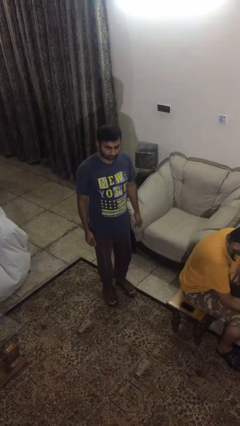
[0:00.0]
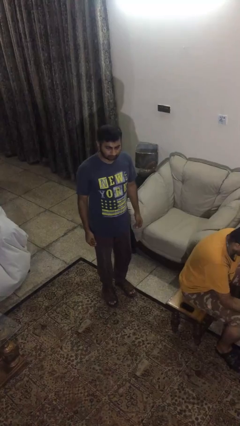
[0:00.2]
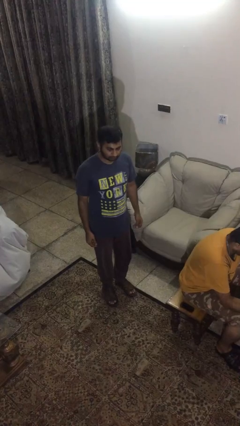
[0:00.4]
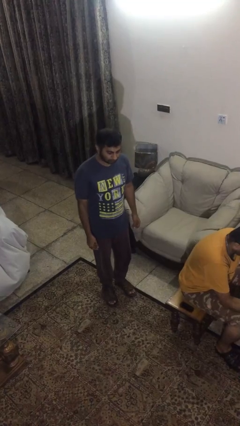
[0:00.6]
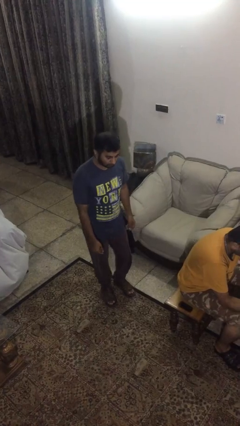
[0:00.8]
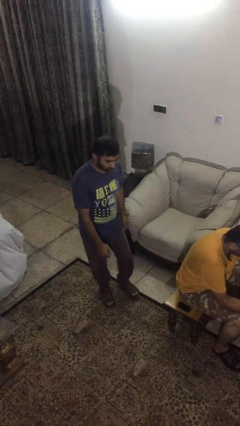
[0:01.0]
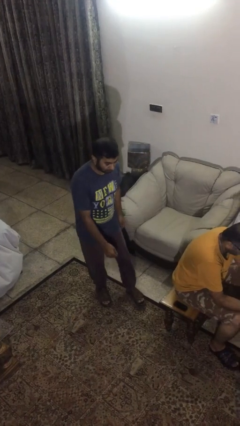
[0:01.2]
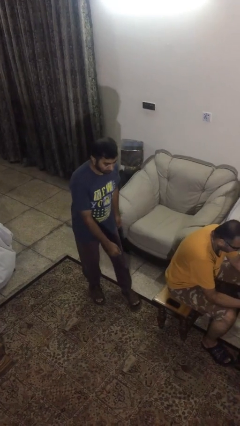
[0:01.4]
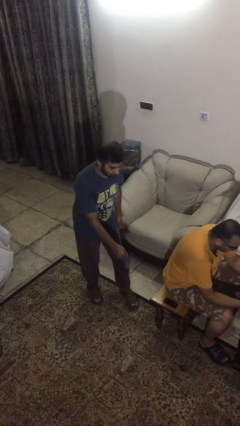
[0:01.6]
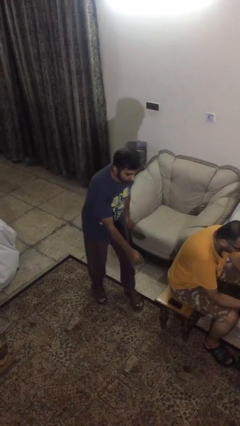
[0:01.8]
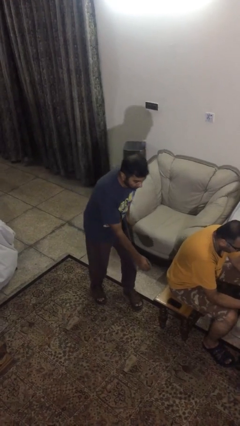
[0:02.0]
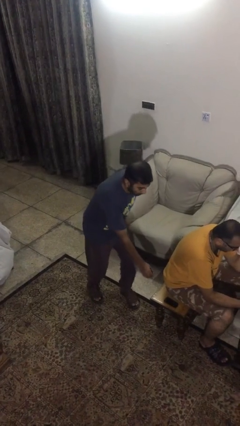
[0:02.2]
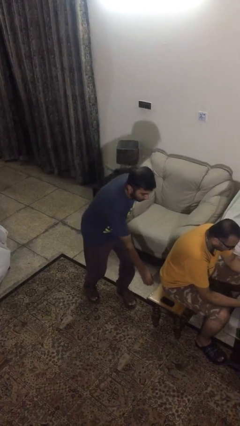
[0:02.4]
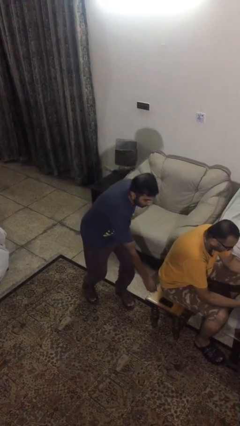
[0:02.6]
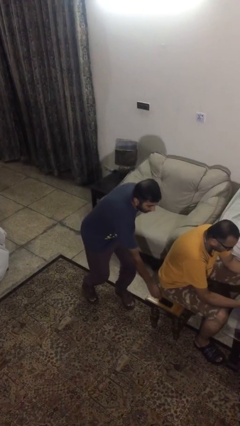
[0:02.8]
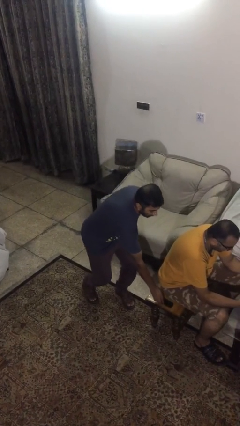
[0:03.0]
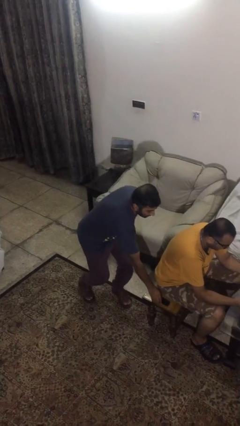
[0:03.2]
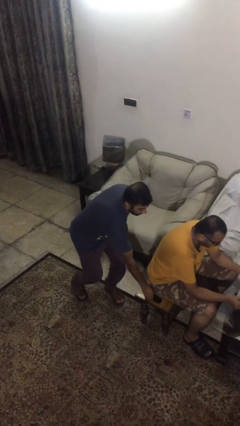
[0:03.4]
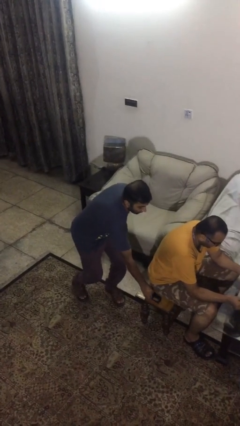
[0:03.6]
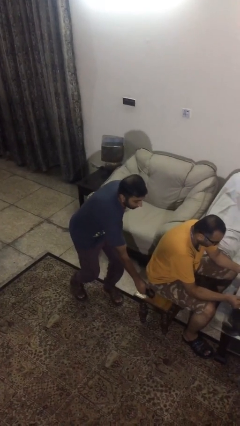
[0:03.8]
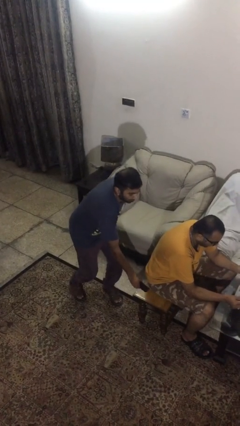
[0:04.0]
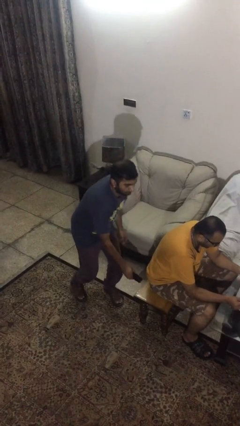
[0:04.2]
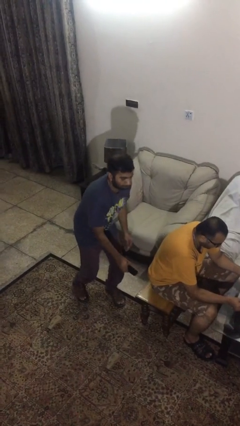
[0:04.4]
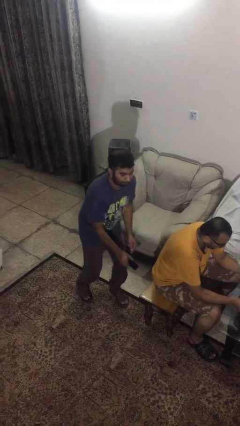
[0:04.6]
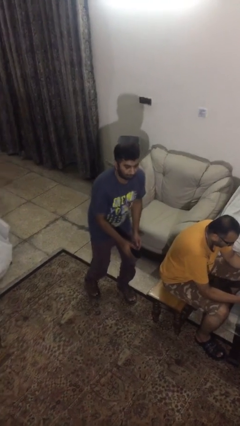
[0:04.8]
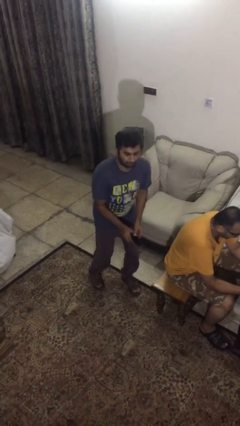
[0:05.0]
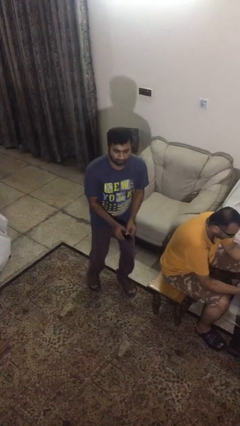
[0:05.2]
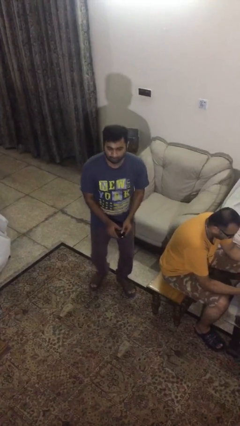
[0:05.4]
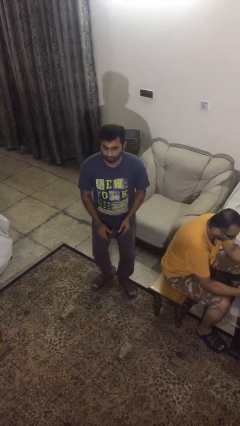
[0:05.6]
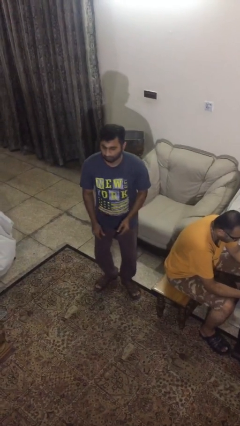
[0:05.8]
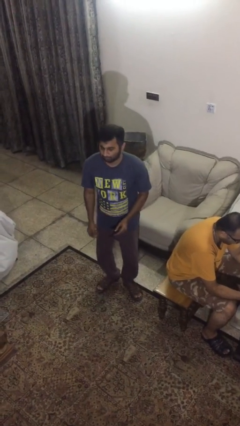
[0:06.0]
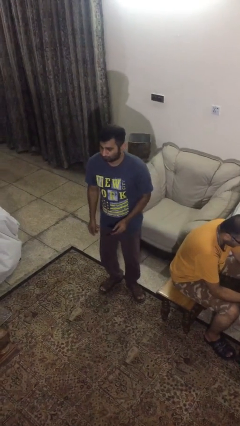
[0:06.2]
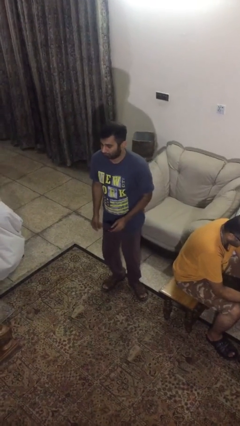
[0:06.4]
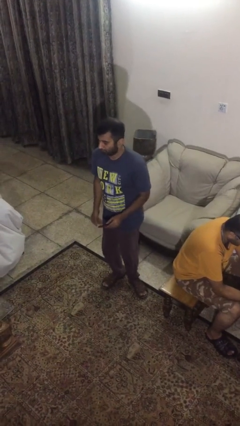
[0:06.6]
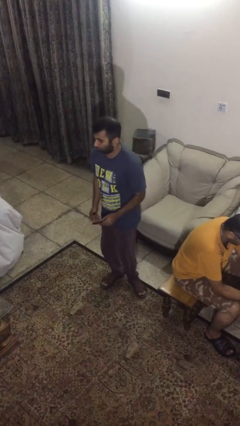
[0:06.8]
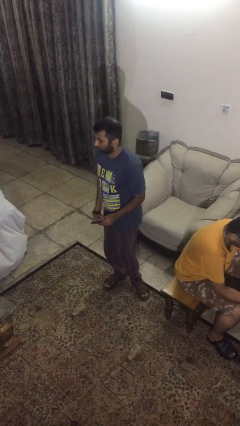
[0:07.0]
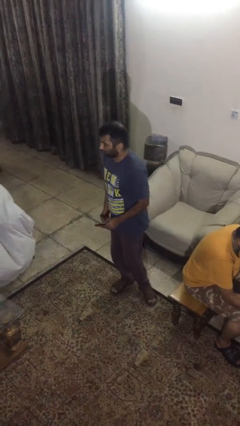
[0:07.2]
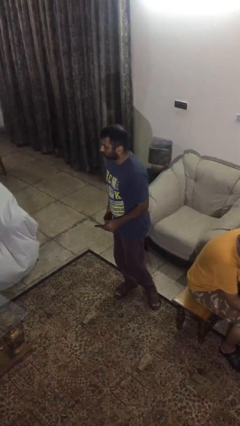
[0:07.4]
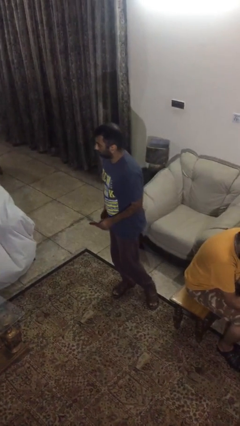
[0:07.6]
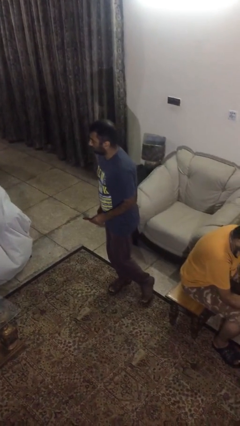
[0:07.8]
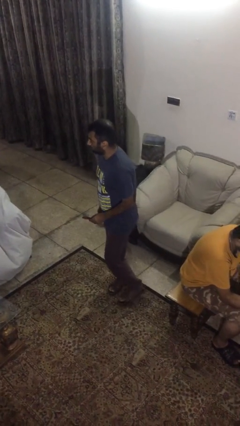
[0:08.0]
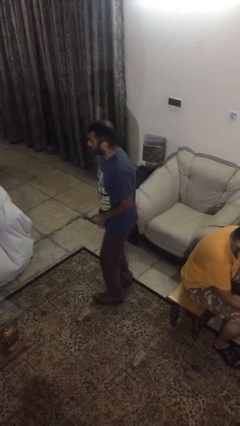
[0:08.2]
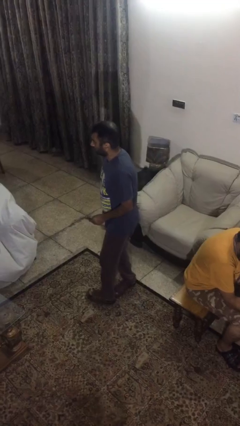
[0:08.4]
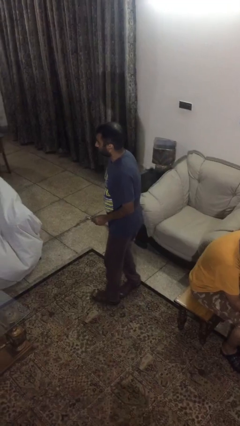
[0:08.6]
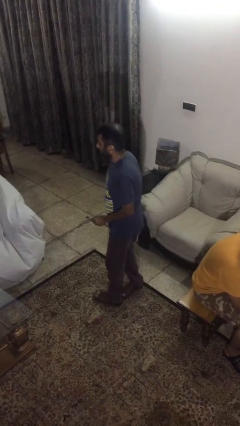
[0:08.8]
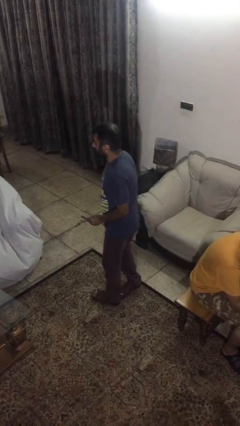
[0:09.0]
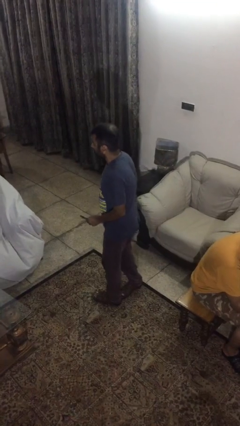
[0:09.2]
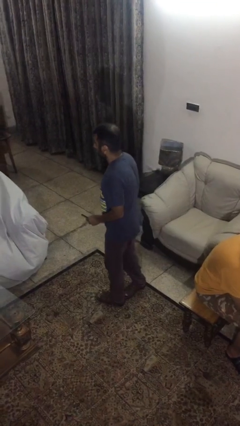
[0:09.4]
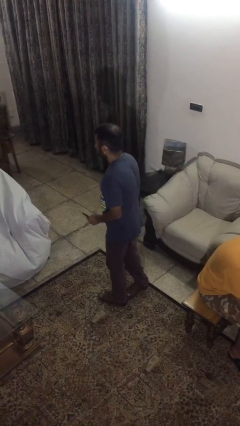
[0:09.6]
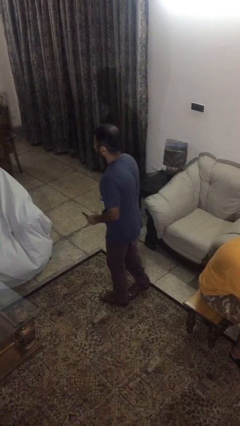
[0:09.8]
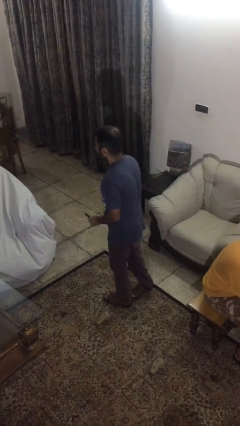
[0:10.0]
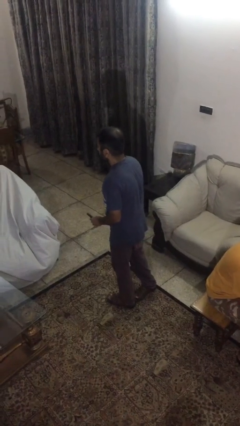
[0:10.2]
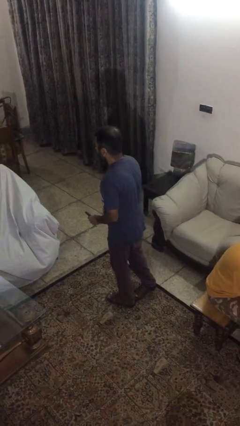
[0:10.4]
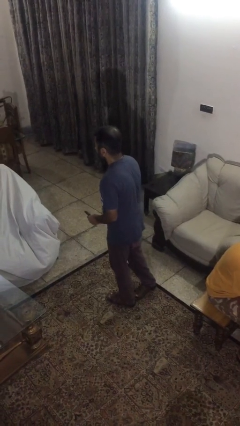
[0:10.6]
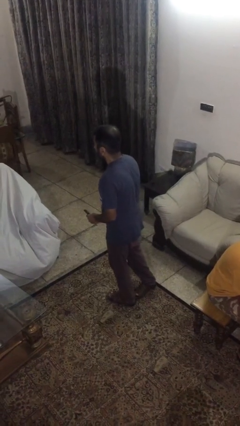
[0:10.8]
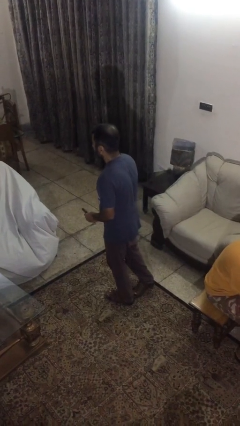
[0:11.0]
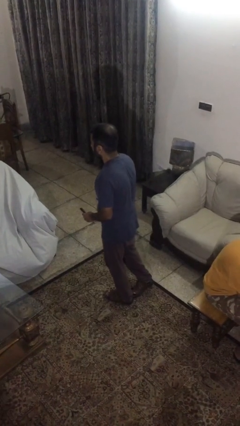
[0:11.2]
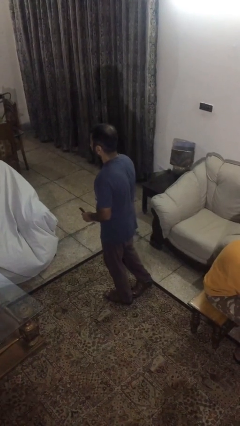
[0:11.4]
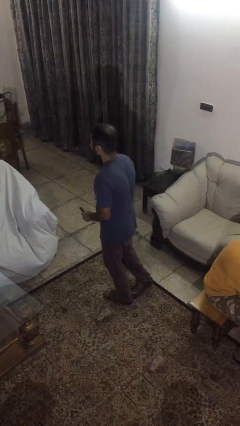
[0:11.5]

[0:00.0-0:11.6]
person steals object from person

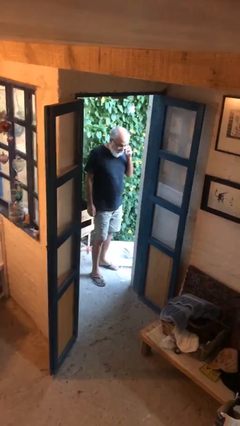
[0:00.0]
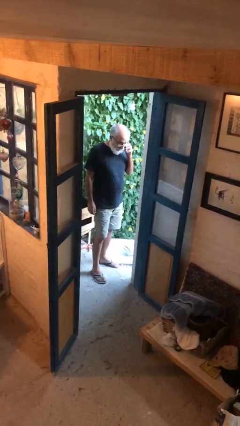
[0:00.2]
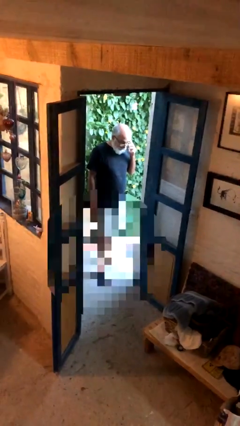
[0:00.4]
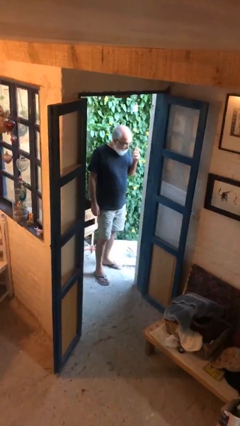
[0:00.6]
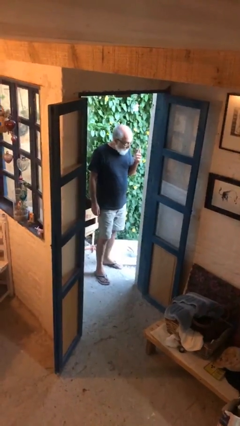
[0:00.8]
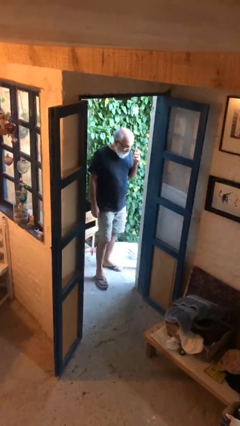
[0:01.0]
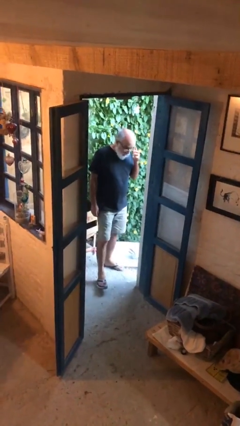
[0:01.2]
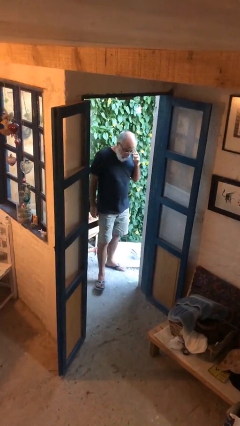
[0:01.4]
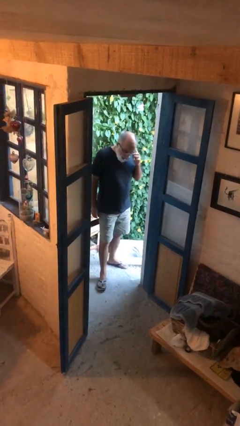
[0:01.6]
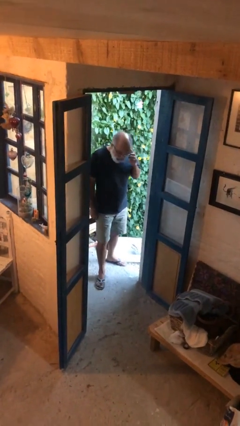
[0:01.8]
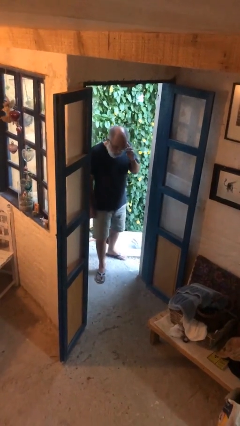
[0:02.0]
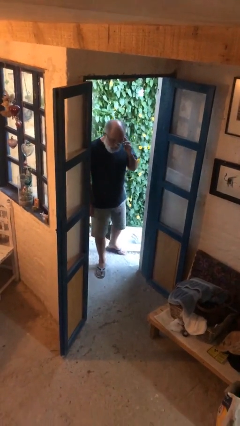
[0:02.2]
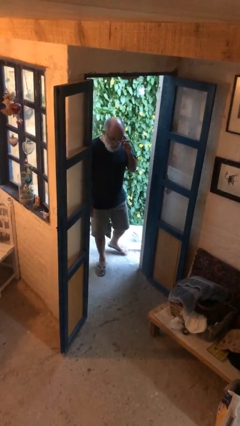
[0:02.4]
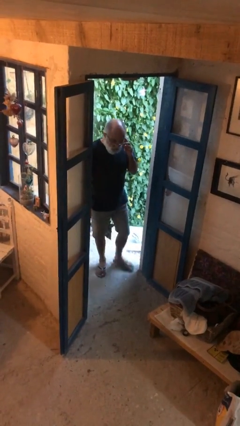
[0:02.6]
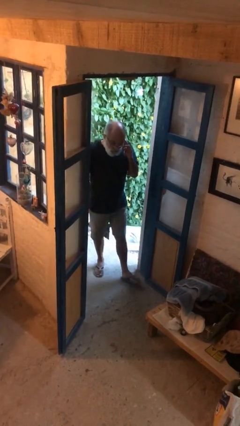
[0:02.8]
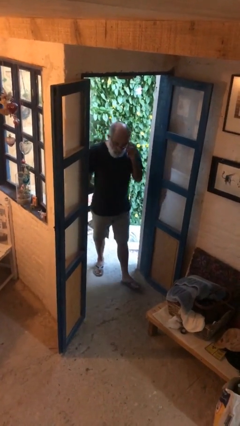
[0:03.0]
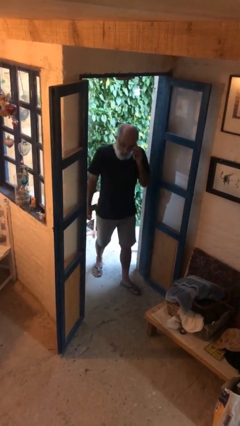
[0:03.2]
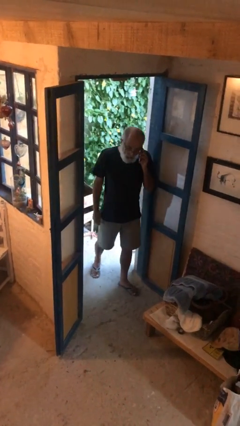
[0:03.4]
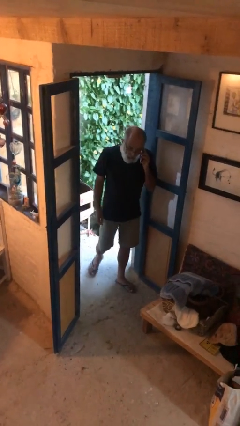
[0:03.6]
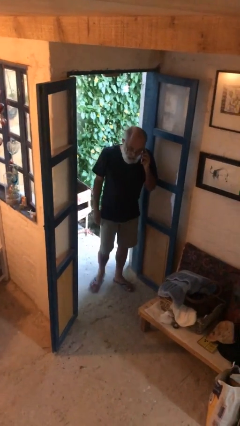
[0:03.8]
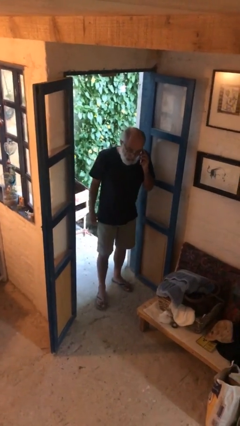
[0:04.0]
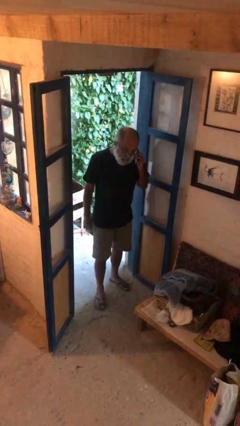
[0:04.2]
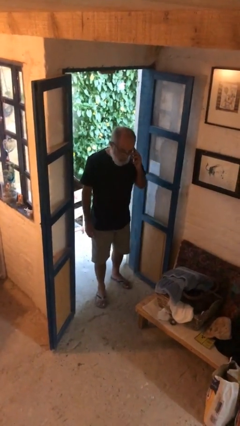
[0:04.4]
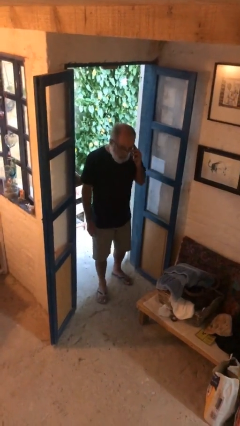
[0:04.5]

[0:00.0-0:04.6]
person enters scene through structure

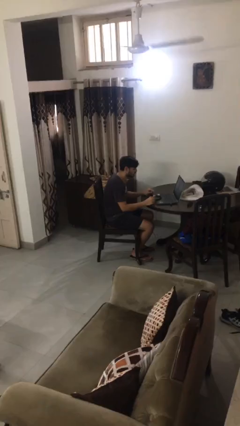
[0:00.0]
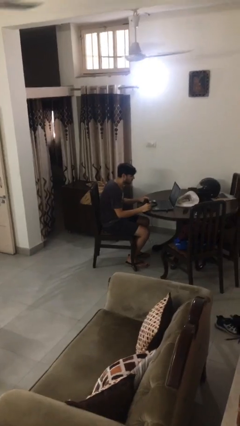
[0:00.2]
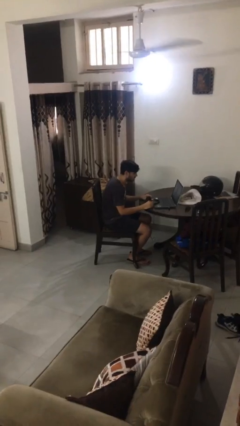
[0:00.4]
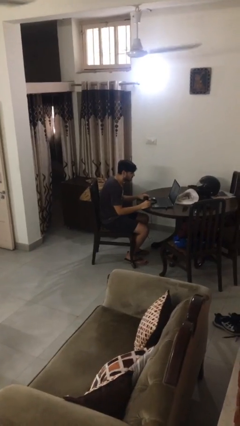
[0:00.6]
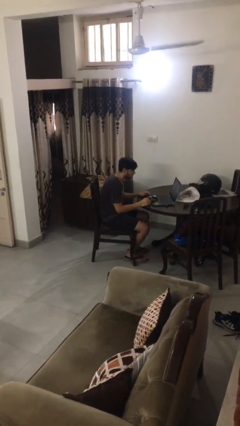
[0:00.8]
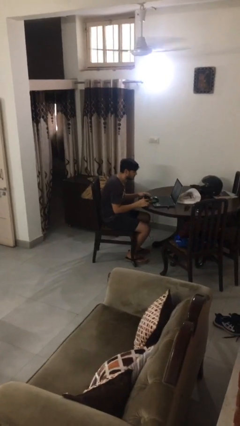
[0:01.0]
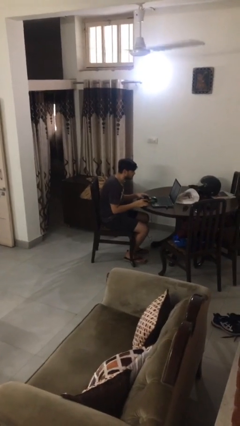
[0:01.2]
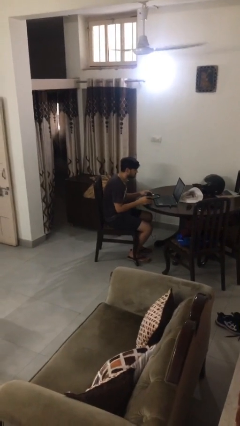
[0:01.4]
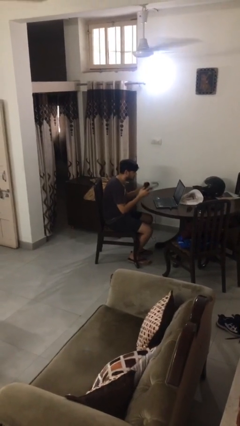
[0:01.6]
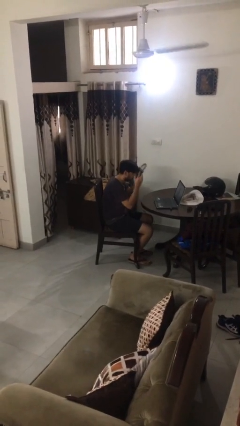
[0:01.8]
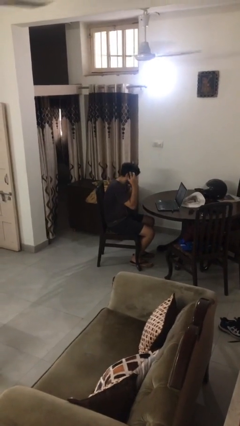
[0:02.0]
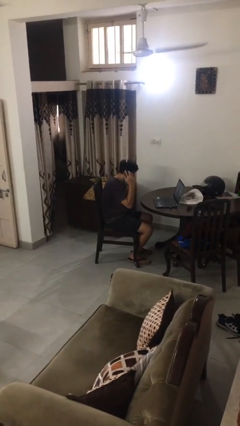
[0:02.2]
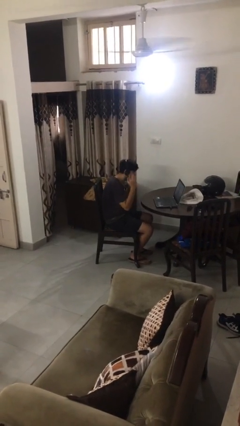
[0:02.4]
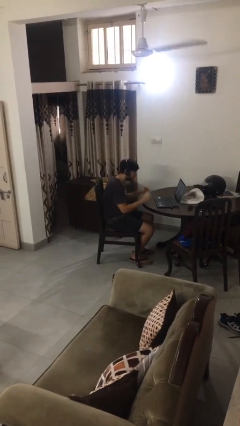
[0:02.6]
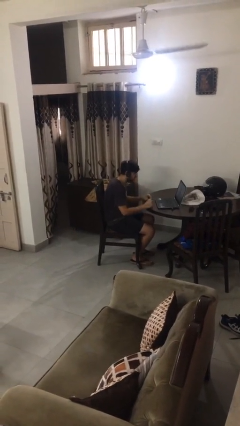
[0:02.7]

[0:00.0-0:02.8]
person puts on headphones
